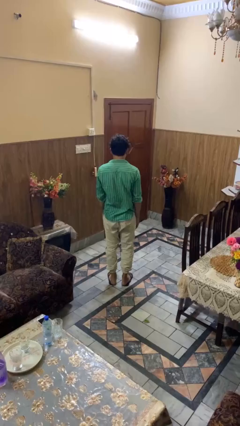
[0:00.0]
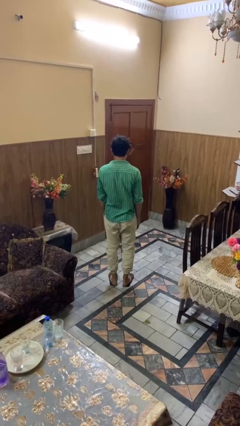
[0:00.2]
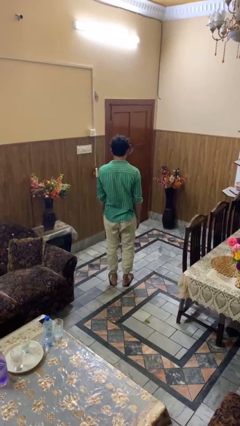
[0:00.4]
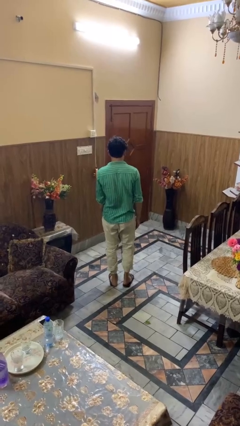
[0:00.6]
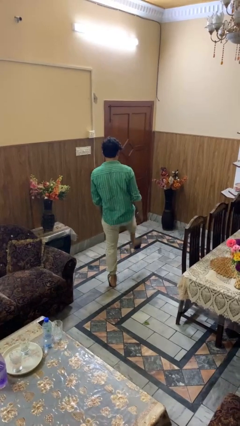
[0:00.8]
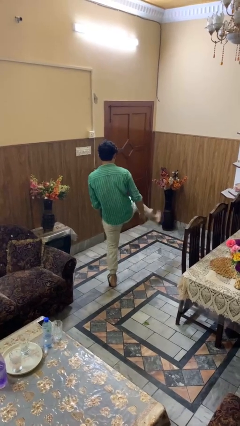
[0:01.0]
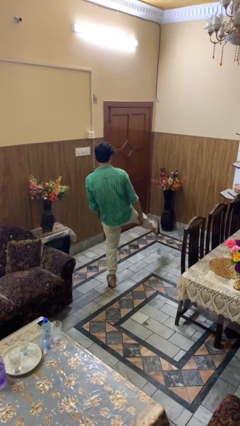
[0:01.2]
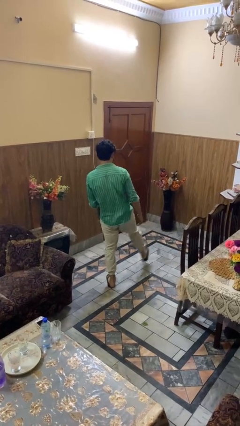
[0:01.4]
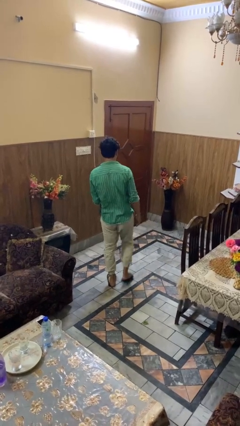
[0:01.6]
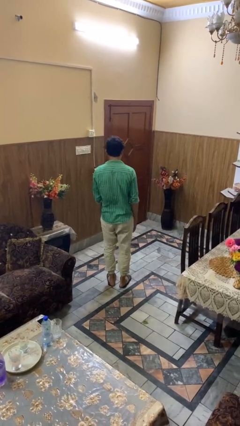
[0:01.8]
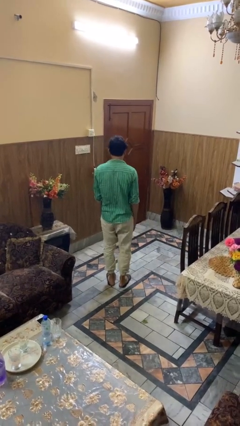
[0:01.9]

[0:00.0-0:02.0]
person karate kicks

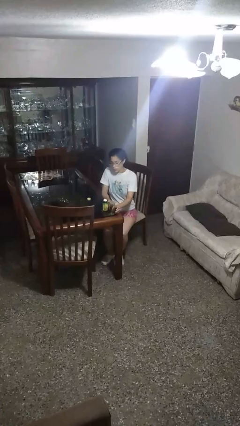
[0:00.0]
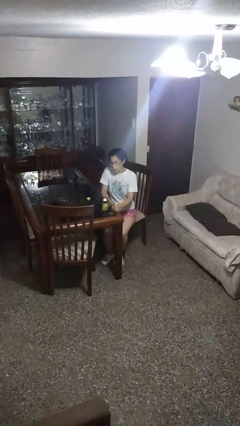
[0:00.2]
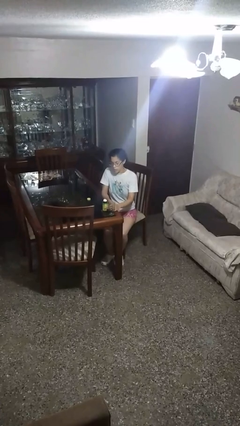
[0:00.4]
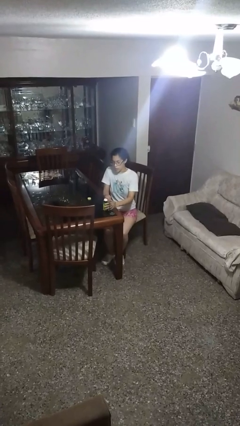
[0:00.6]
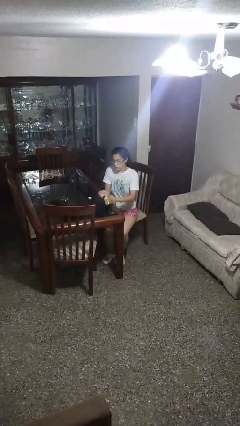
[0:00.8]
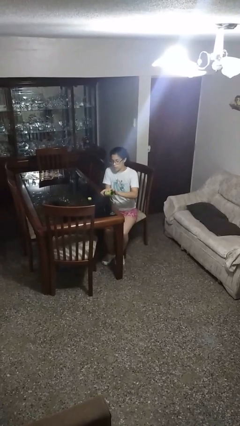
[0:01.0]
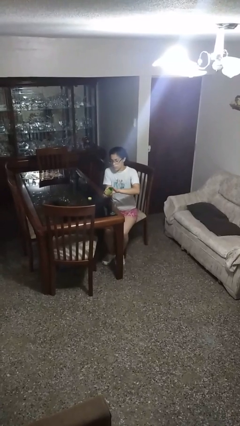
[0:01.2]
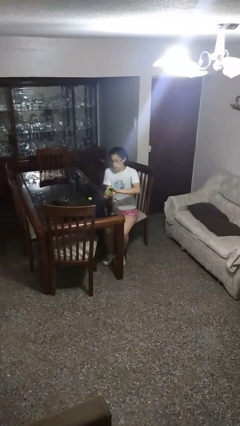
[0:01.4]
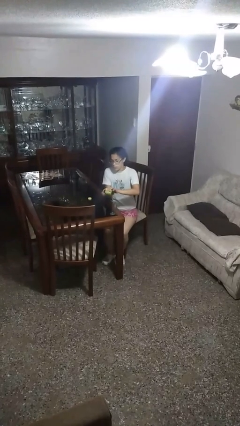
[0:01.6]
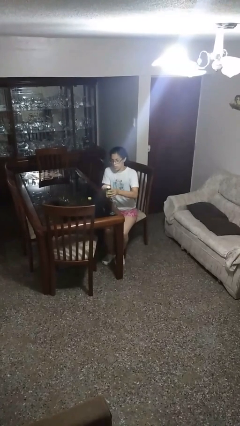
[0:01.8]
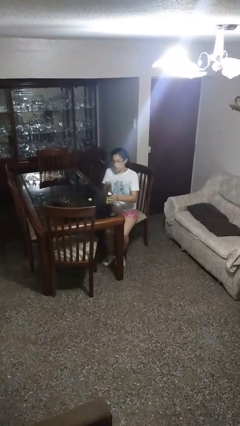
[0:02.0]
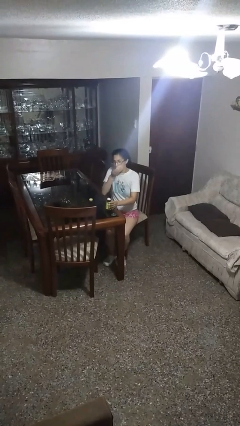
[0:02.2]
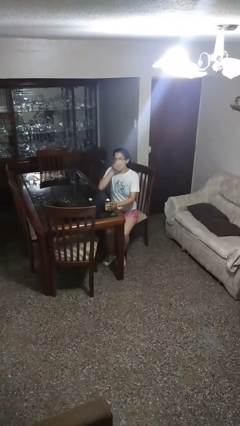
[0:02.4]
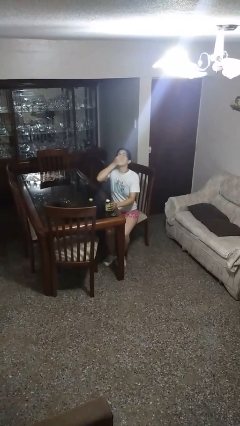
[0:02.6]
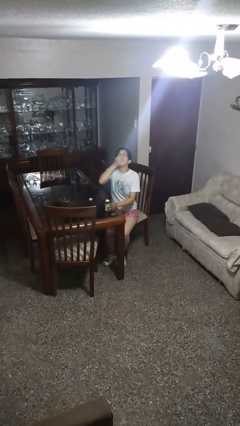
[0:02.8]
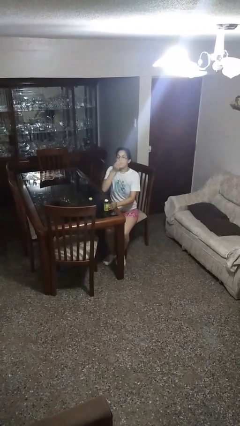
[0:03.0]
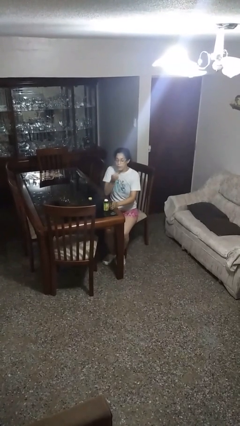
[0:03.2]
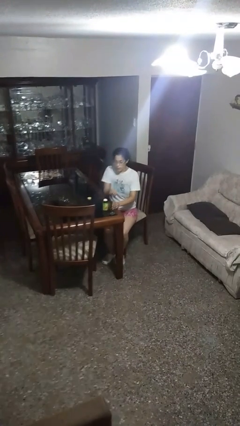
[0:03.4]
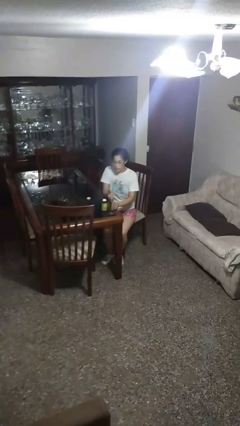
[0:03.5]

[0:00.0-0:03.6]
person takes medicine pills

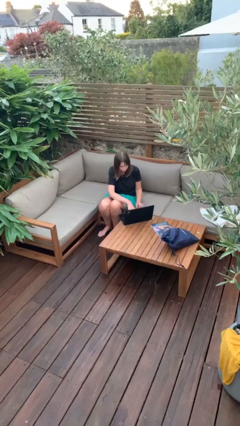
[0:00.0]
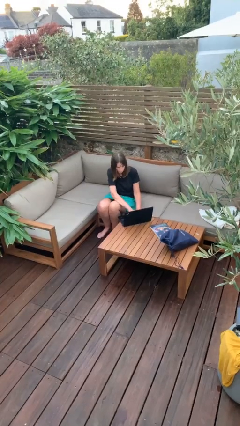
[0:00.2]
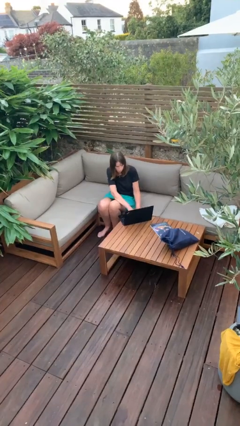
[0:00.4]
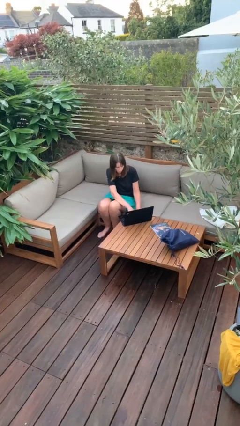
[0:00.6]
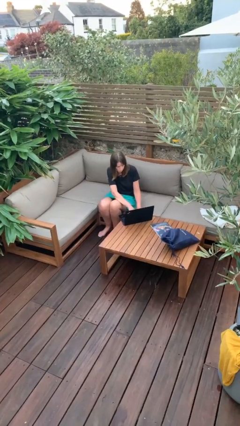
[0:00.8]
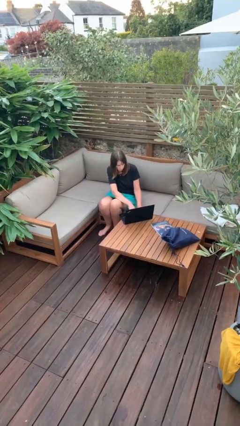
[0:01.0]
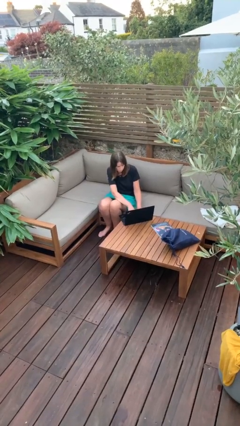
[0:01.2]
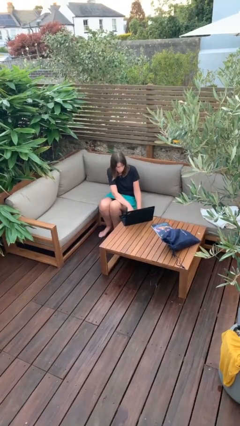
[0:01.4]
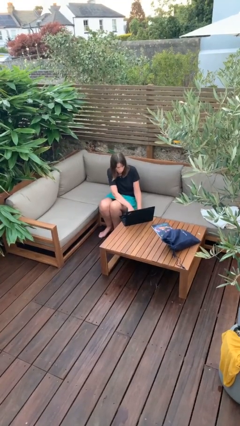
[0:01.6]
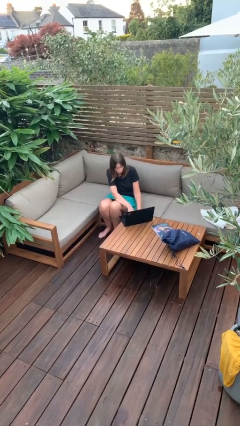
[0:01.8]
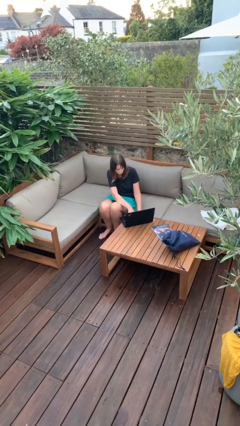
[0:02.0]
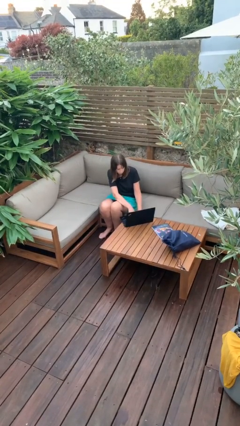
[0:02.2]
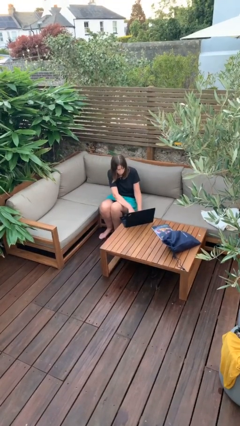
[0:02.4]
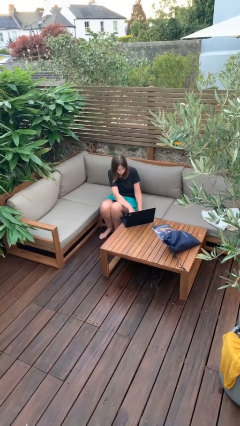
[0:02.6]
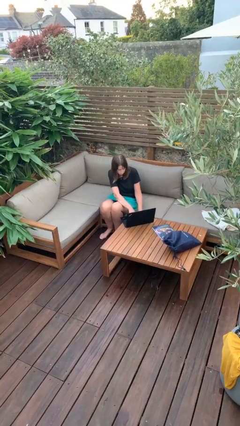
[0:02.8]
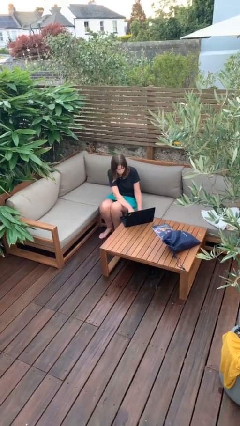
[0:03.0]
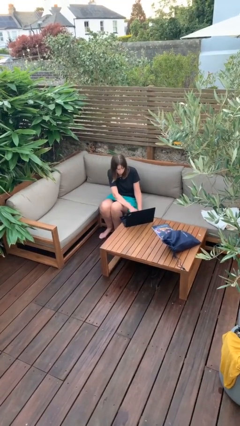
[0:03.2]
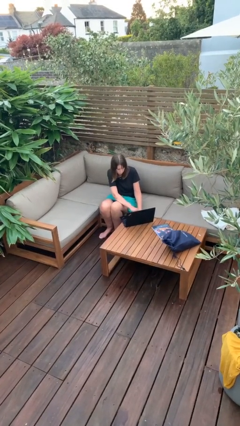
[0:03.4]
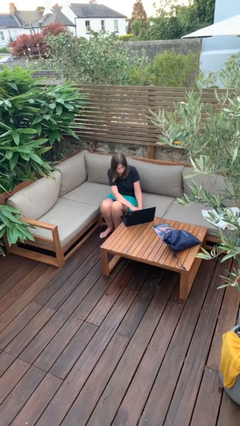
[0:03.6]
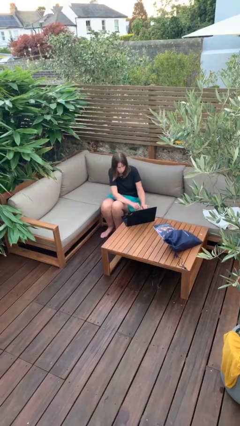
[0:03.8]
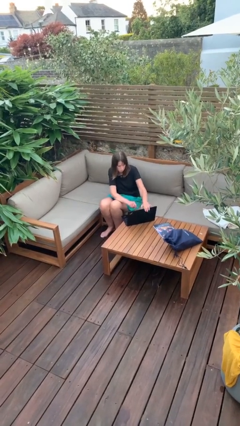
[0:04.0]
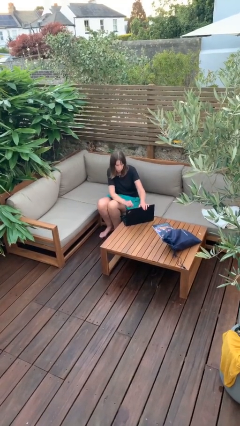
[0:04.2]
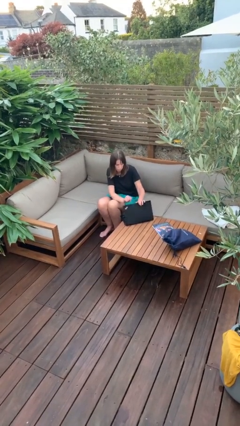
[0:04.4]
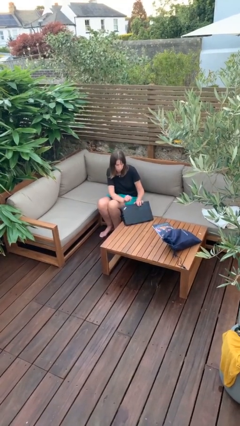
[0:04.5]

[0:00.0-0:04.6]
person interacts with laptop

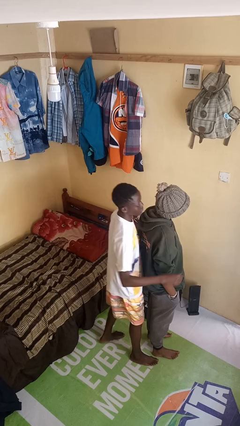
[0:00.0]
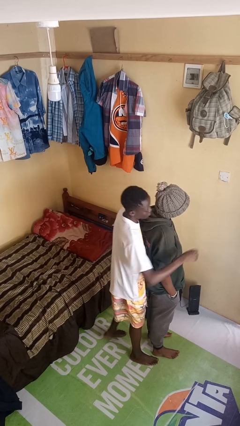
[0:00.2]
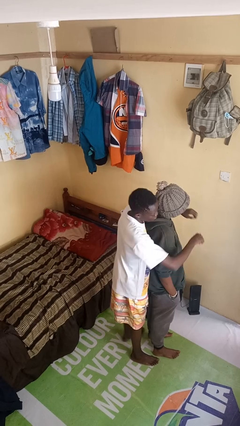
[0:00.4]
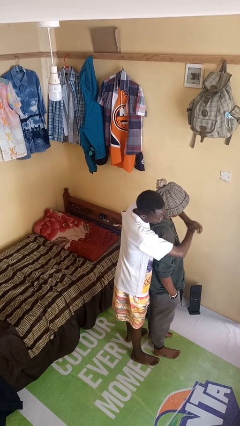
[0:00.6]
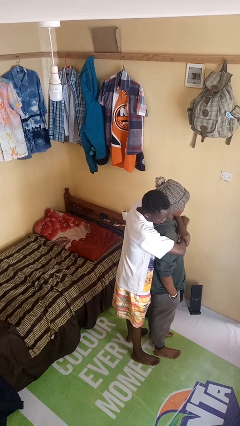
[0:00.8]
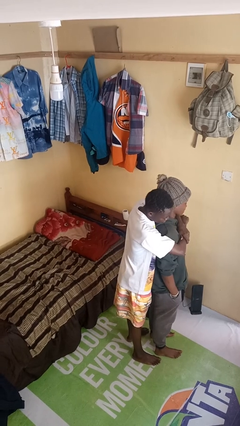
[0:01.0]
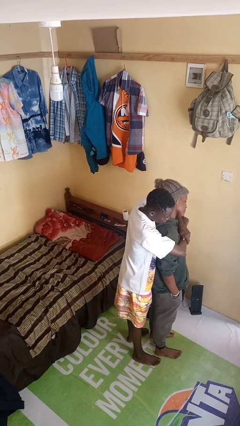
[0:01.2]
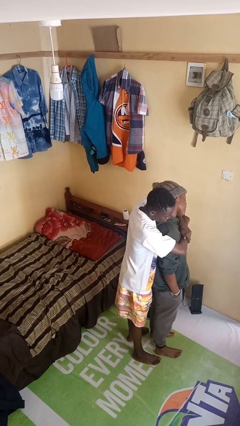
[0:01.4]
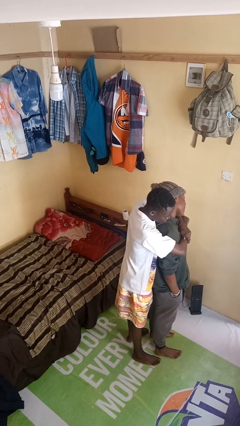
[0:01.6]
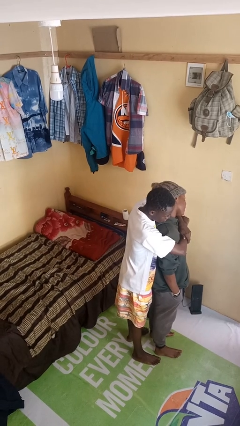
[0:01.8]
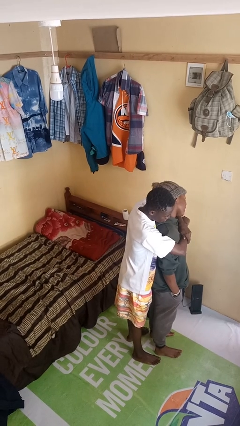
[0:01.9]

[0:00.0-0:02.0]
person hugs person from behind

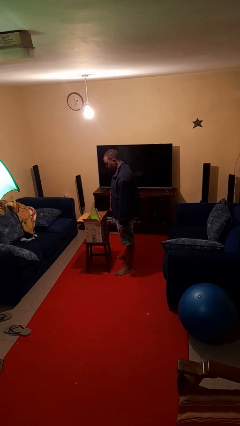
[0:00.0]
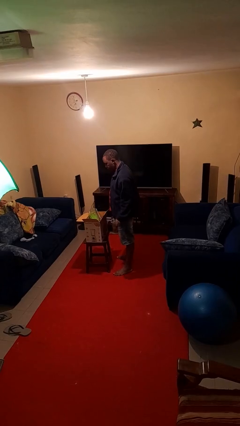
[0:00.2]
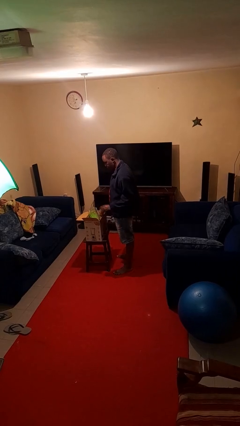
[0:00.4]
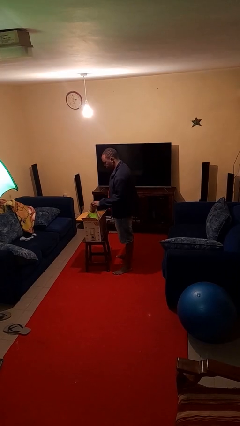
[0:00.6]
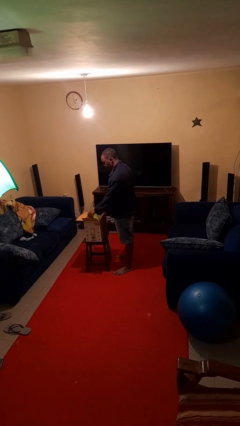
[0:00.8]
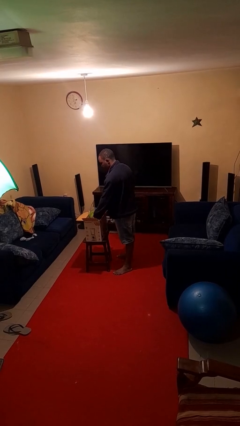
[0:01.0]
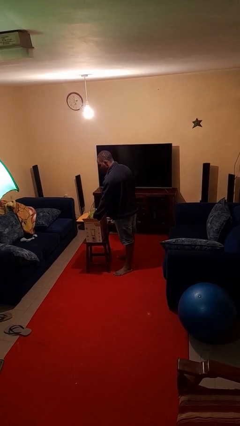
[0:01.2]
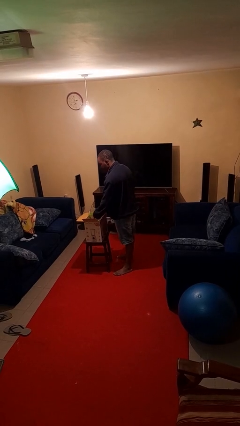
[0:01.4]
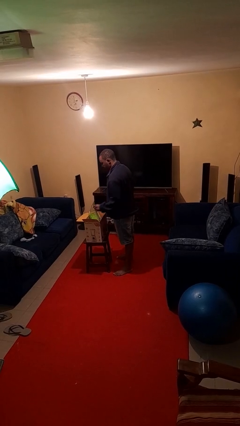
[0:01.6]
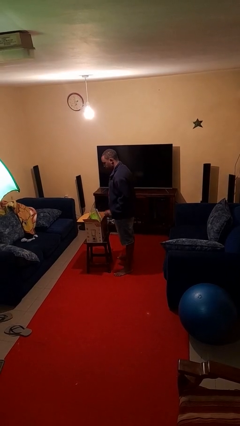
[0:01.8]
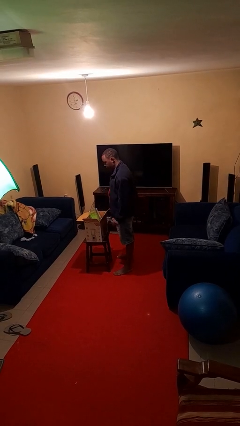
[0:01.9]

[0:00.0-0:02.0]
person puts object into box

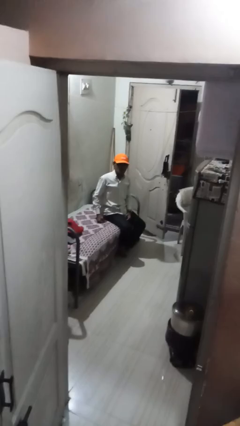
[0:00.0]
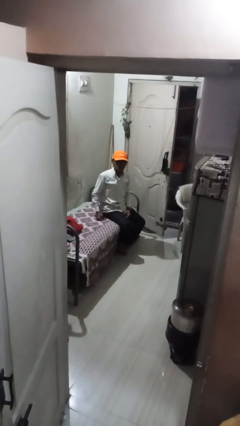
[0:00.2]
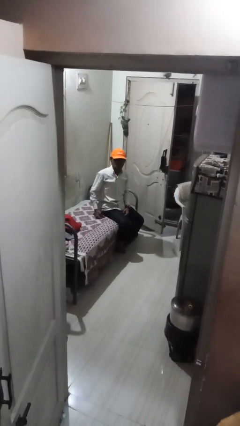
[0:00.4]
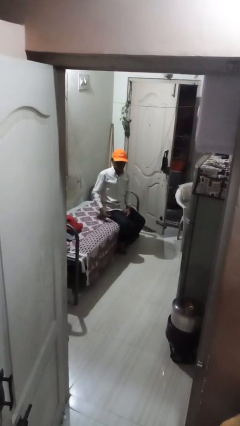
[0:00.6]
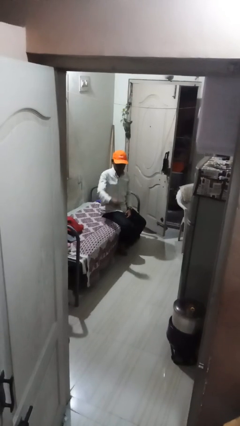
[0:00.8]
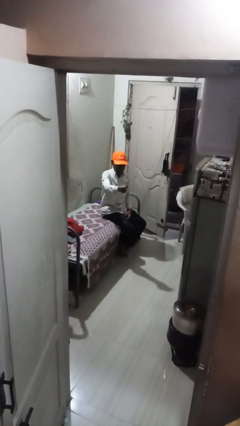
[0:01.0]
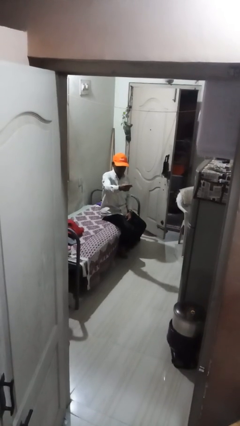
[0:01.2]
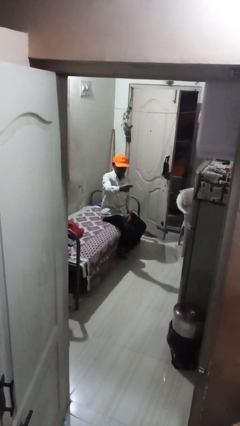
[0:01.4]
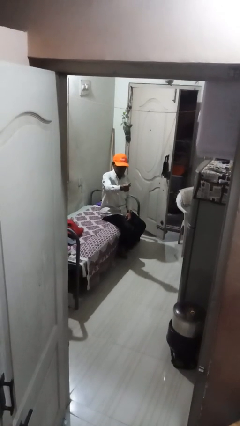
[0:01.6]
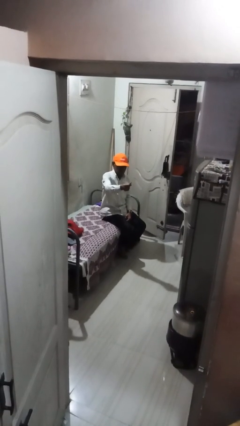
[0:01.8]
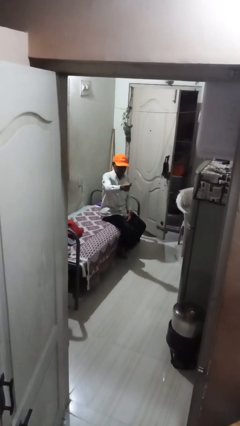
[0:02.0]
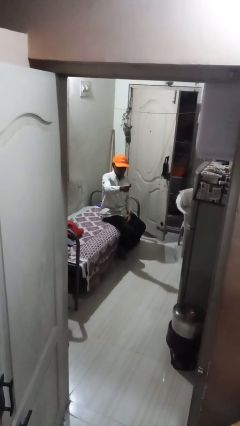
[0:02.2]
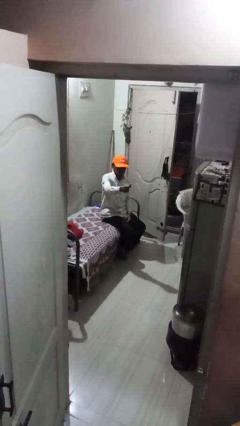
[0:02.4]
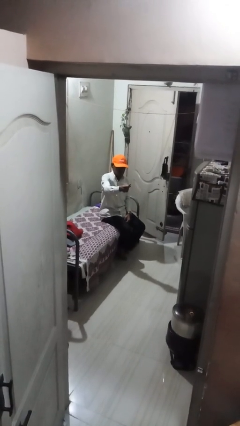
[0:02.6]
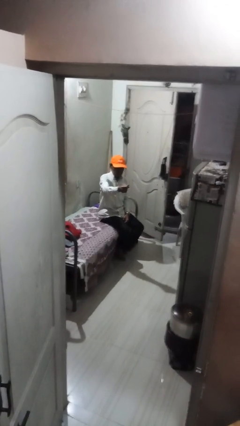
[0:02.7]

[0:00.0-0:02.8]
person snaps fingers

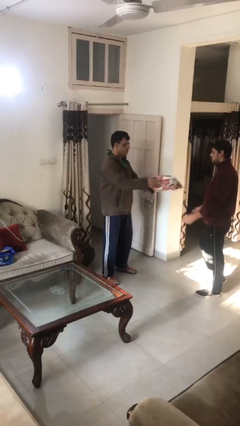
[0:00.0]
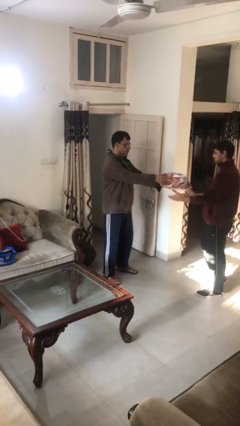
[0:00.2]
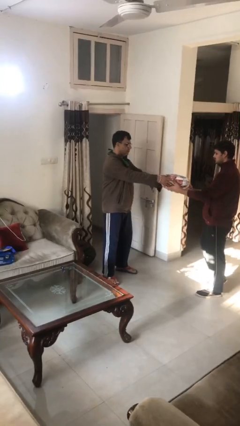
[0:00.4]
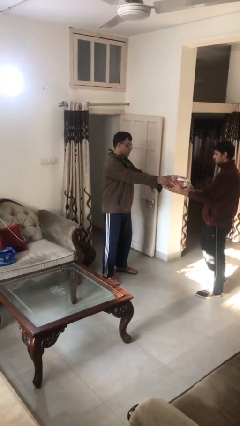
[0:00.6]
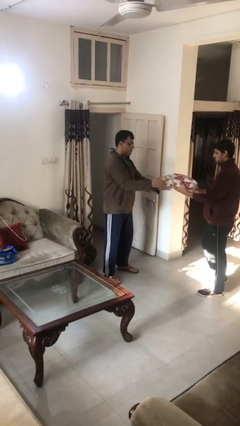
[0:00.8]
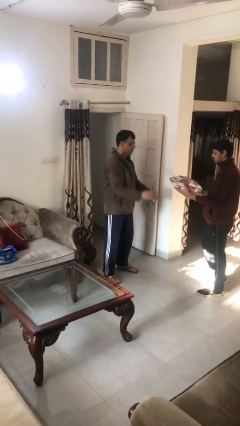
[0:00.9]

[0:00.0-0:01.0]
person transfers object to person
